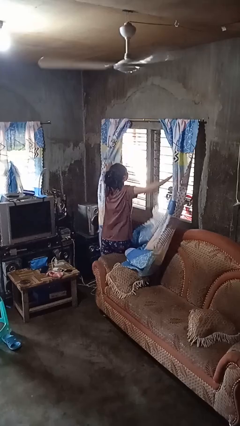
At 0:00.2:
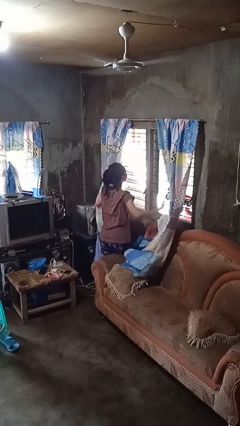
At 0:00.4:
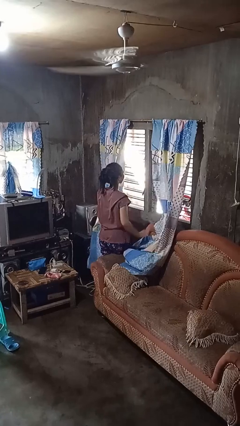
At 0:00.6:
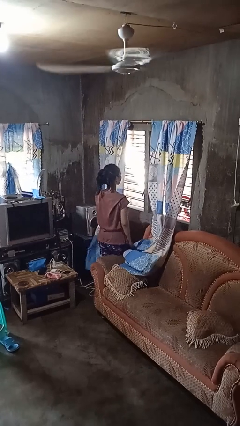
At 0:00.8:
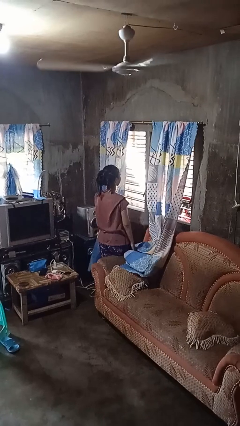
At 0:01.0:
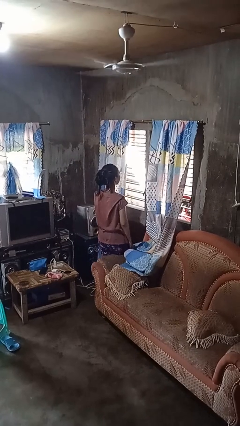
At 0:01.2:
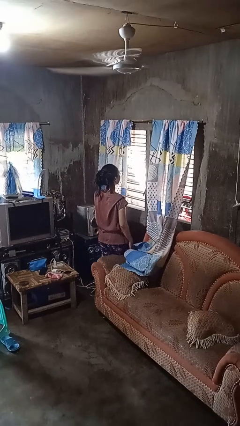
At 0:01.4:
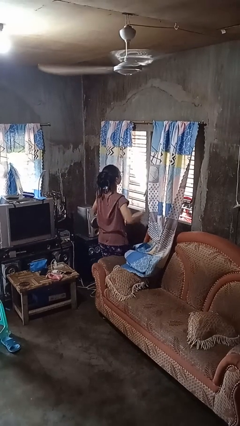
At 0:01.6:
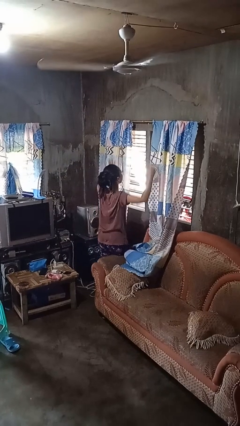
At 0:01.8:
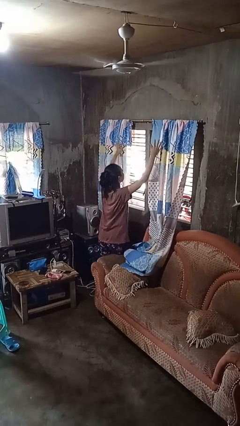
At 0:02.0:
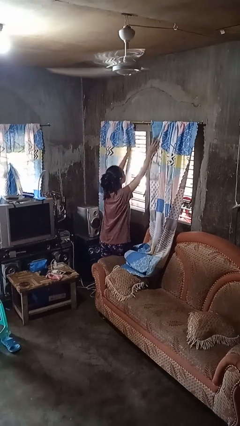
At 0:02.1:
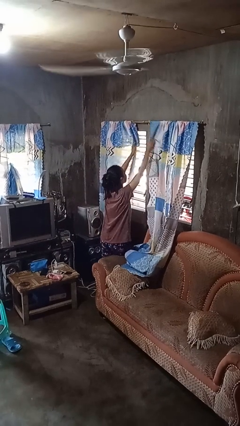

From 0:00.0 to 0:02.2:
person opens curtains

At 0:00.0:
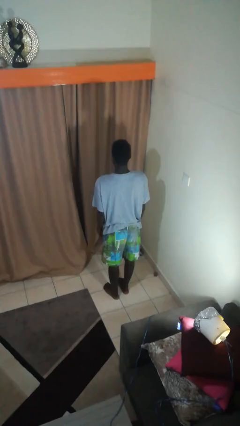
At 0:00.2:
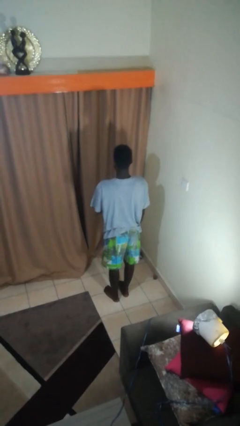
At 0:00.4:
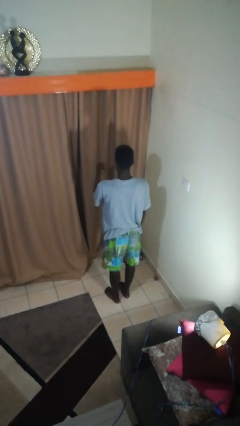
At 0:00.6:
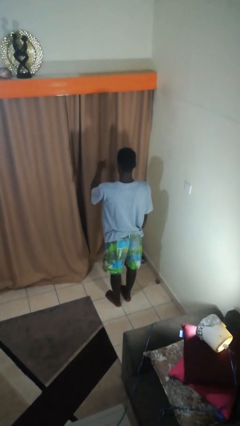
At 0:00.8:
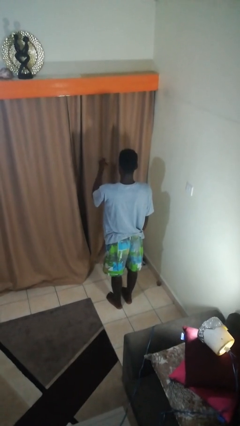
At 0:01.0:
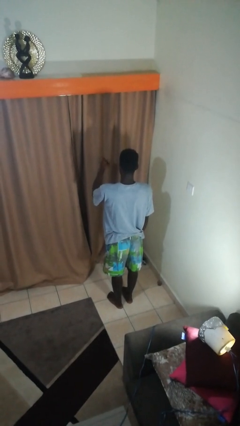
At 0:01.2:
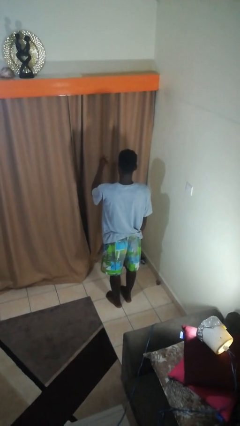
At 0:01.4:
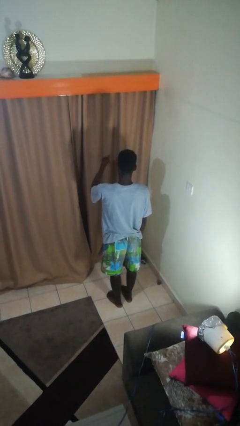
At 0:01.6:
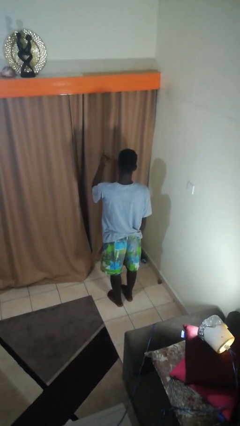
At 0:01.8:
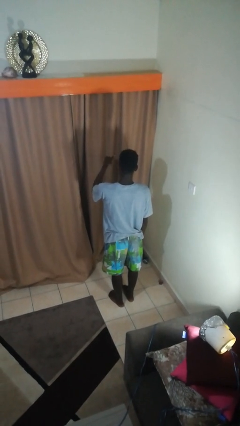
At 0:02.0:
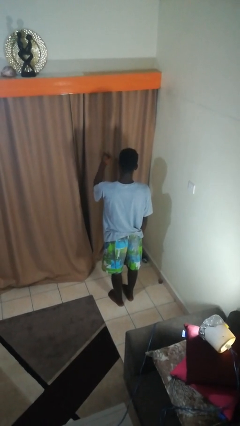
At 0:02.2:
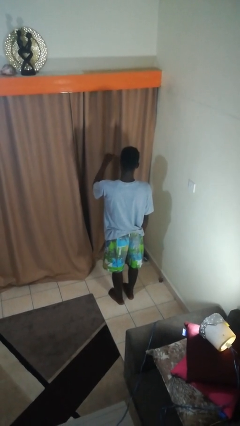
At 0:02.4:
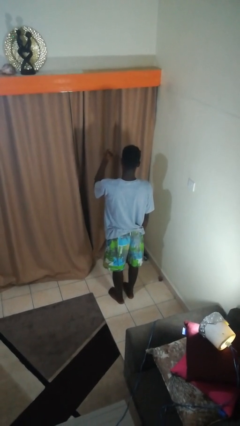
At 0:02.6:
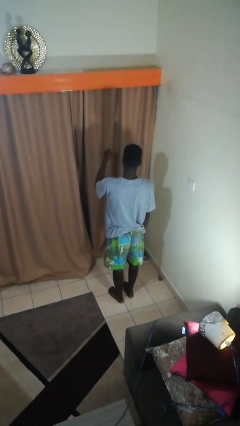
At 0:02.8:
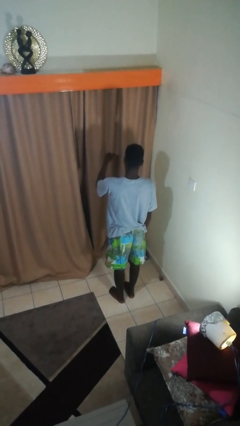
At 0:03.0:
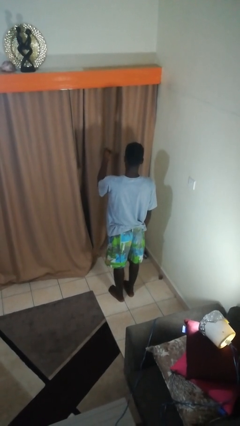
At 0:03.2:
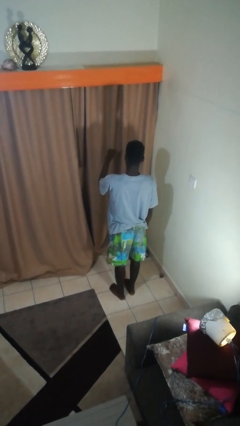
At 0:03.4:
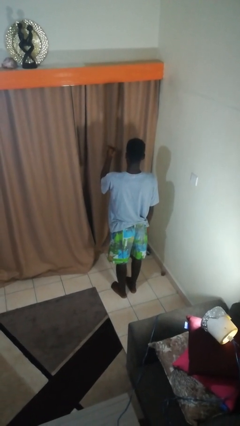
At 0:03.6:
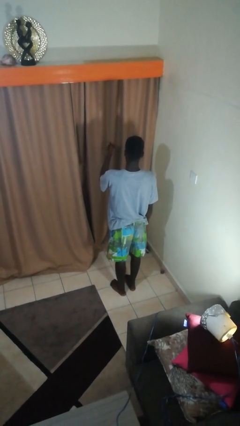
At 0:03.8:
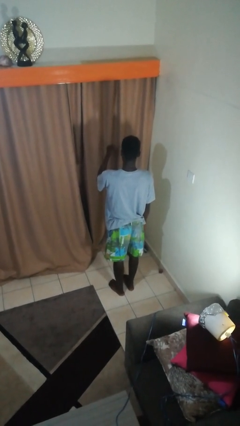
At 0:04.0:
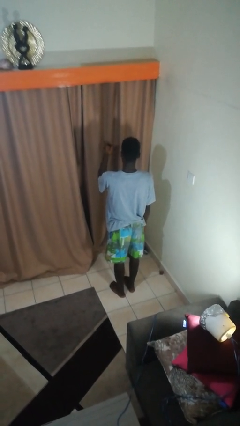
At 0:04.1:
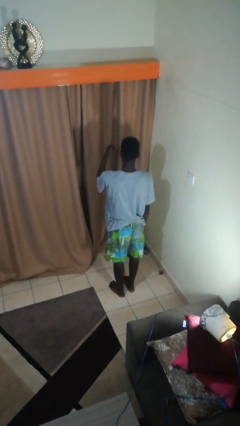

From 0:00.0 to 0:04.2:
person gestures hang loose

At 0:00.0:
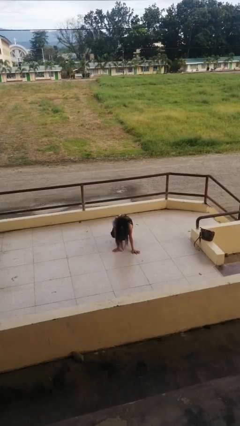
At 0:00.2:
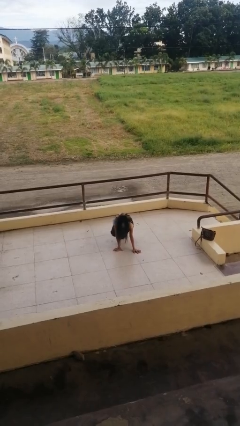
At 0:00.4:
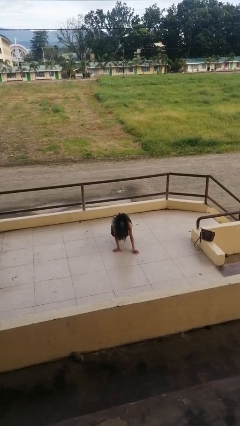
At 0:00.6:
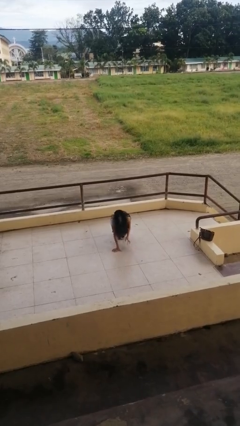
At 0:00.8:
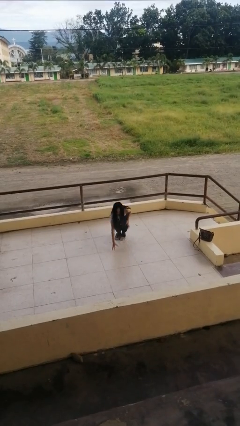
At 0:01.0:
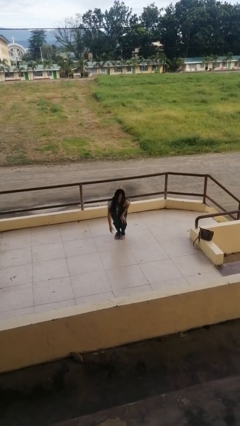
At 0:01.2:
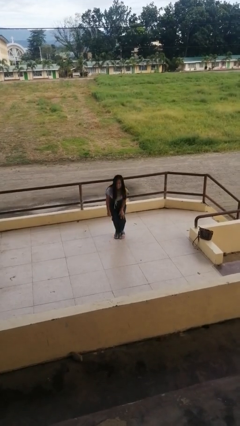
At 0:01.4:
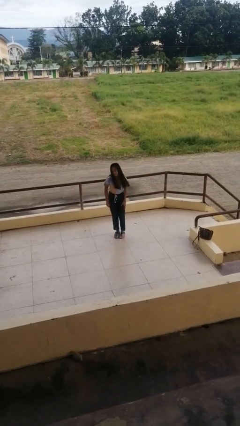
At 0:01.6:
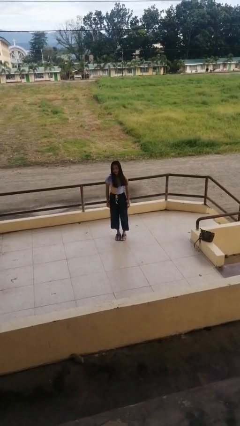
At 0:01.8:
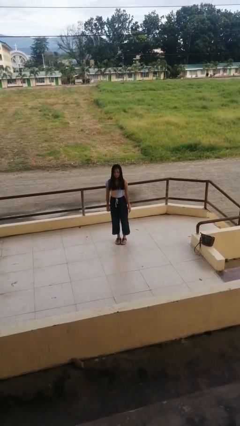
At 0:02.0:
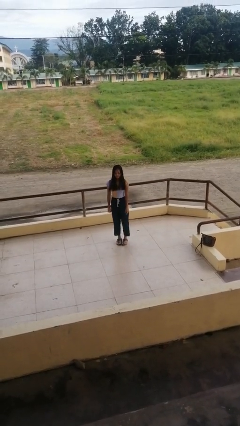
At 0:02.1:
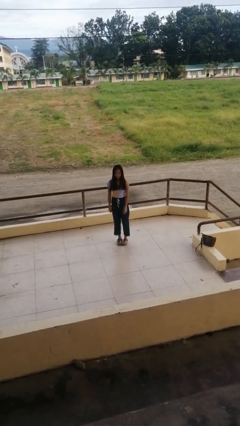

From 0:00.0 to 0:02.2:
person stands up from floor

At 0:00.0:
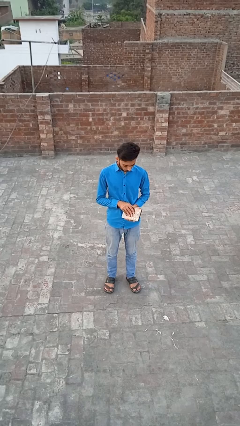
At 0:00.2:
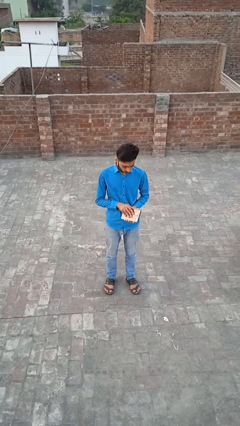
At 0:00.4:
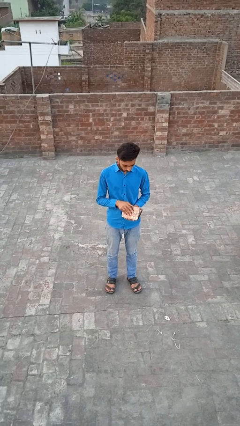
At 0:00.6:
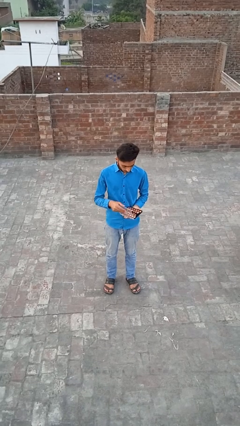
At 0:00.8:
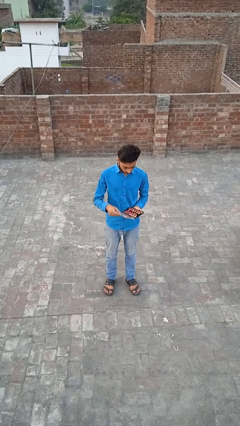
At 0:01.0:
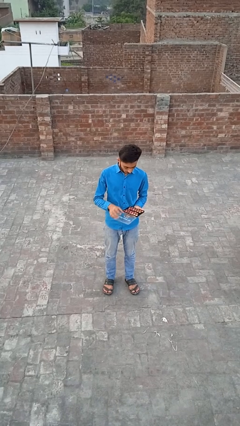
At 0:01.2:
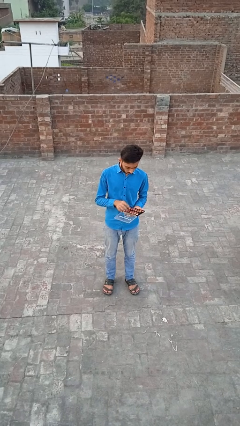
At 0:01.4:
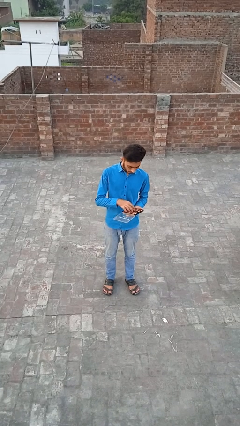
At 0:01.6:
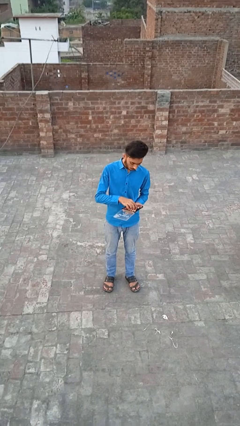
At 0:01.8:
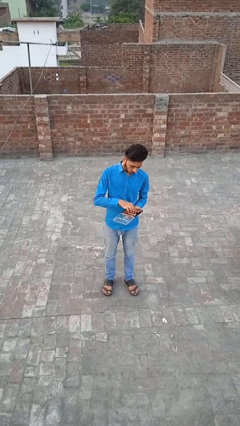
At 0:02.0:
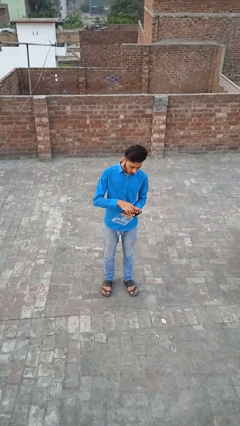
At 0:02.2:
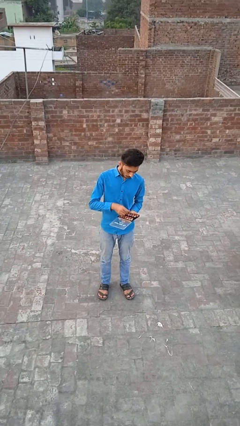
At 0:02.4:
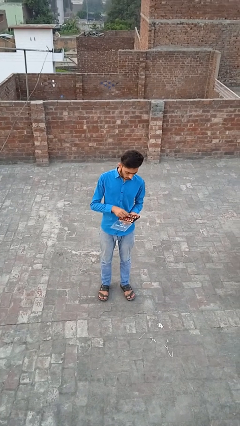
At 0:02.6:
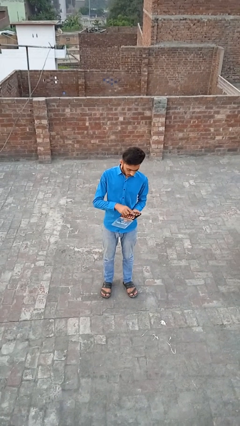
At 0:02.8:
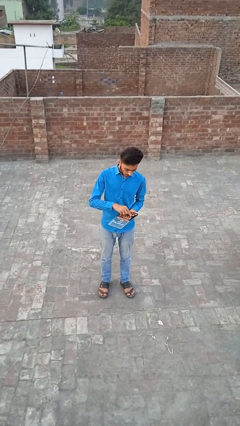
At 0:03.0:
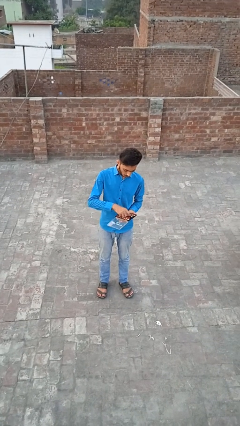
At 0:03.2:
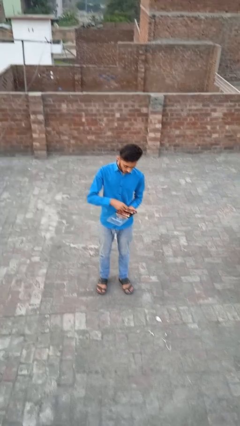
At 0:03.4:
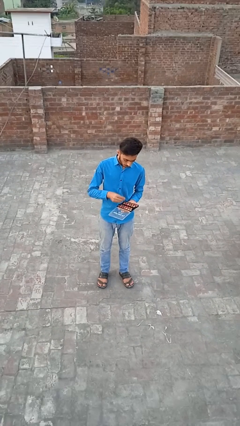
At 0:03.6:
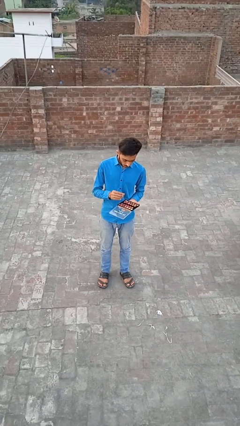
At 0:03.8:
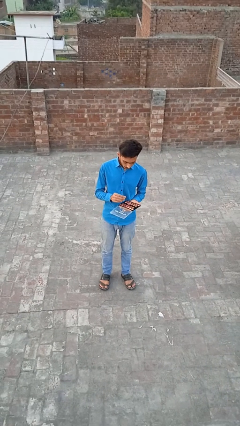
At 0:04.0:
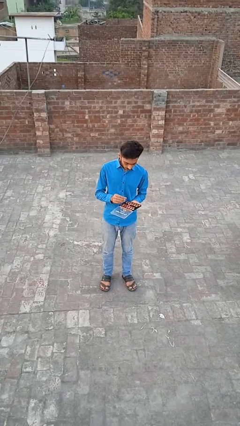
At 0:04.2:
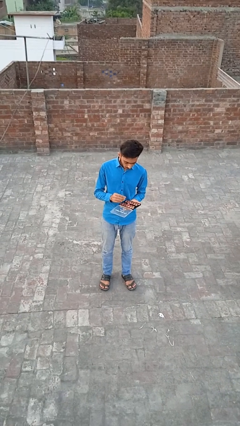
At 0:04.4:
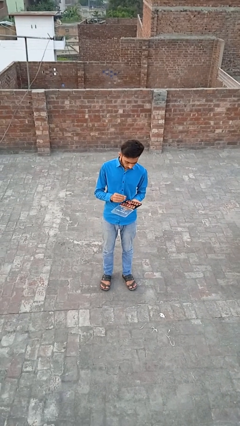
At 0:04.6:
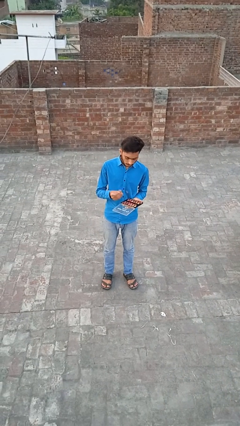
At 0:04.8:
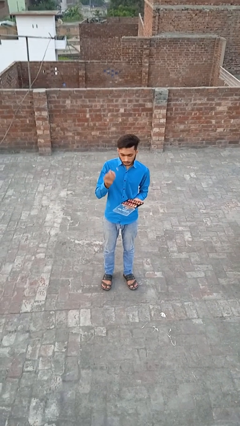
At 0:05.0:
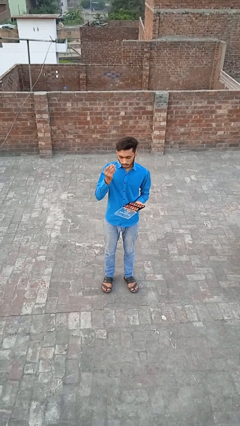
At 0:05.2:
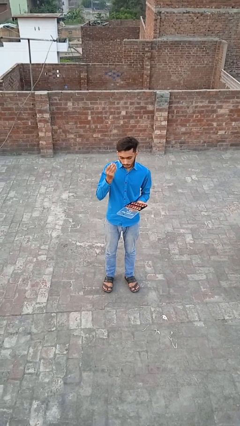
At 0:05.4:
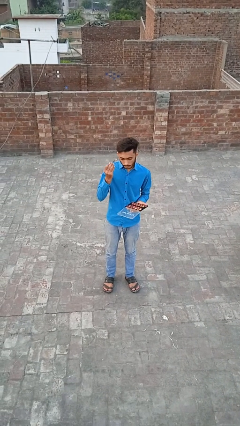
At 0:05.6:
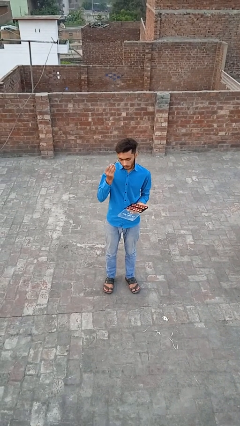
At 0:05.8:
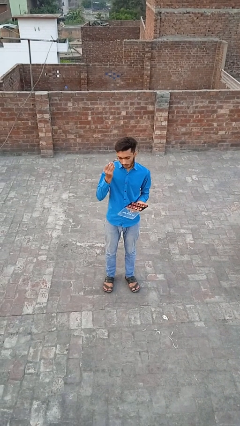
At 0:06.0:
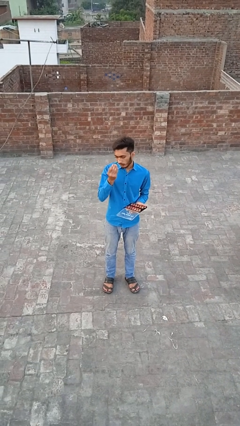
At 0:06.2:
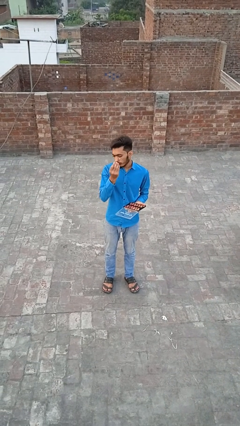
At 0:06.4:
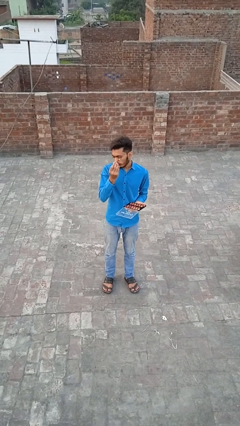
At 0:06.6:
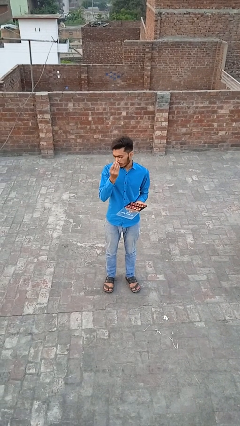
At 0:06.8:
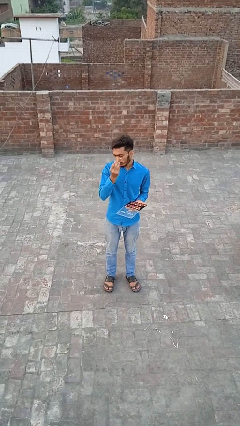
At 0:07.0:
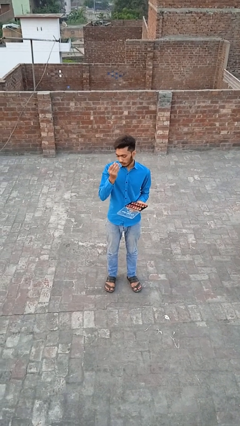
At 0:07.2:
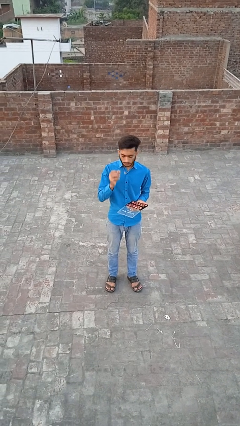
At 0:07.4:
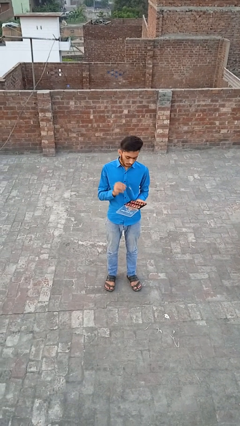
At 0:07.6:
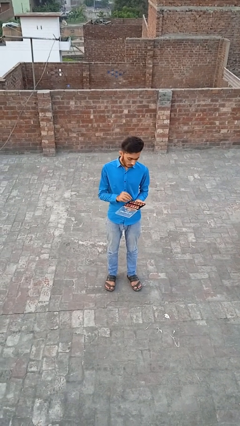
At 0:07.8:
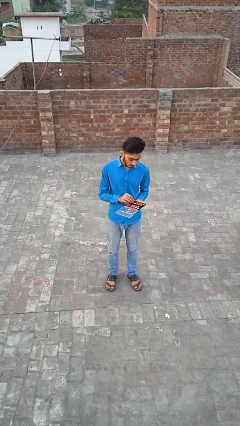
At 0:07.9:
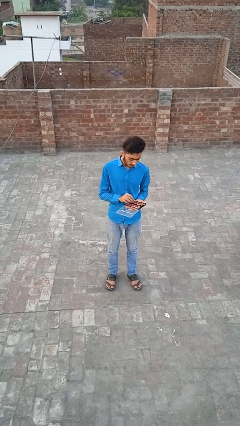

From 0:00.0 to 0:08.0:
person applies eye makeup

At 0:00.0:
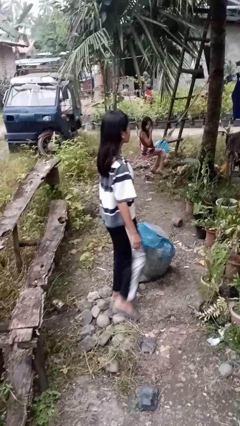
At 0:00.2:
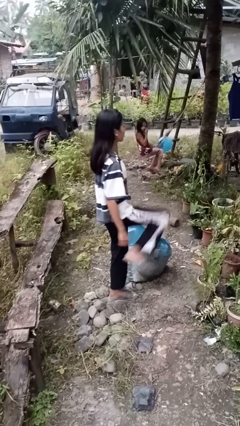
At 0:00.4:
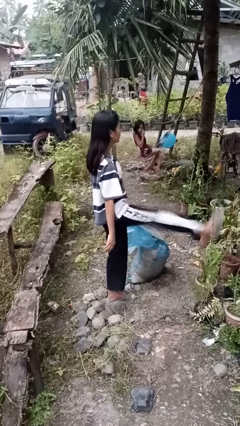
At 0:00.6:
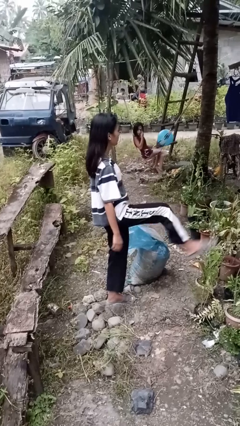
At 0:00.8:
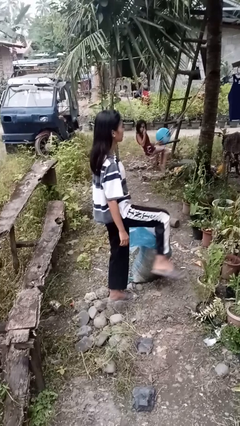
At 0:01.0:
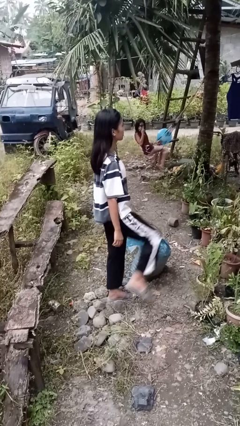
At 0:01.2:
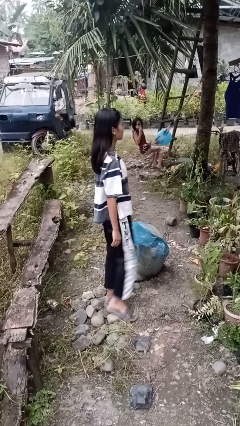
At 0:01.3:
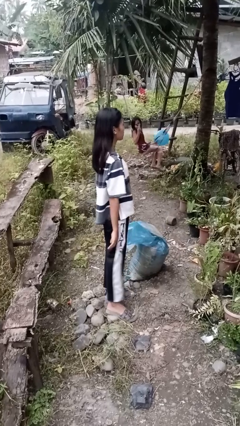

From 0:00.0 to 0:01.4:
person karate kicks
